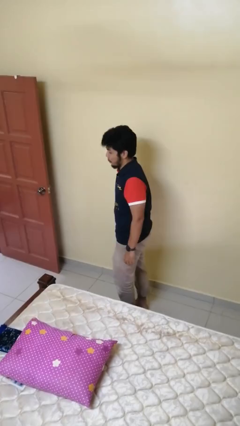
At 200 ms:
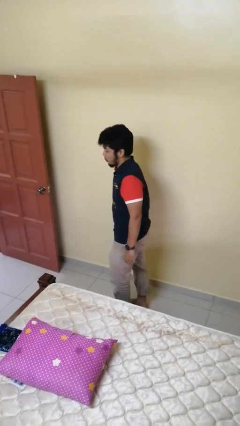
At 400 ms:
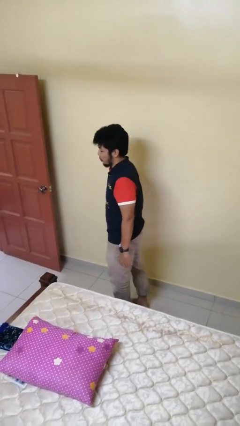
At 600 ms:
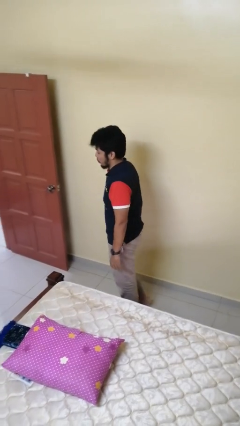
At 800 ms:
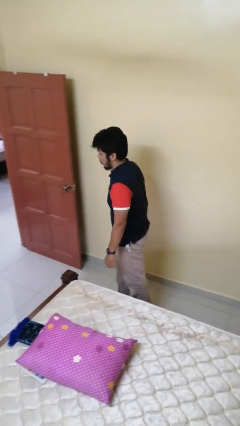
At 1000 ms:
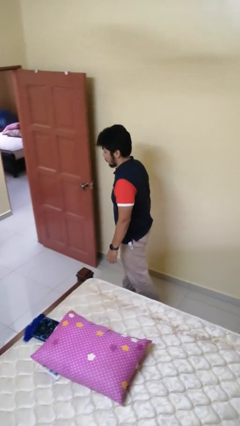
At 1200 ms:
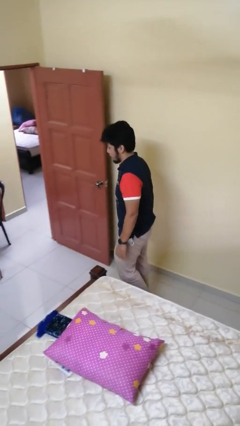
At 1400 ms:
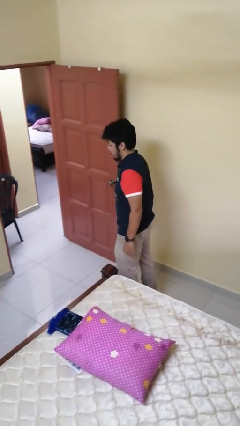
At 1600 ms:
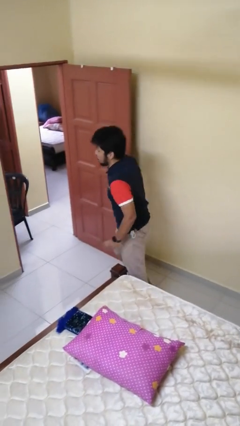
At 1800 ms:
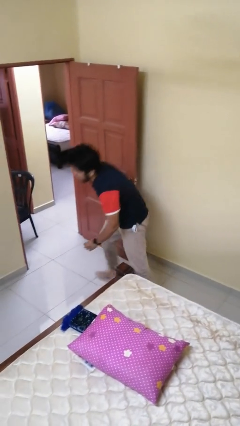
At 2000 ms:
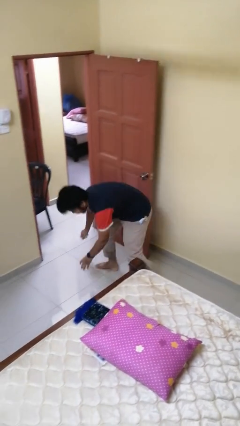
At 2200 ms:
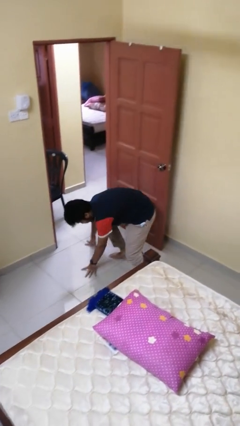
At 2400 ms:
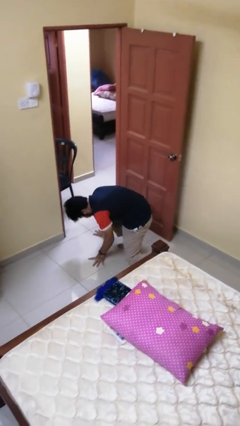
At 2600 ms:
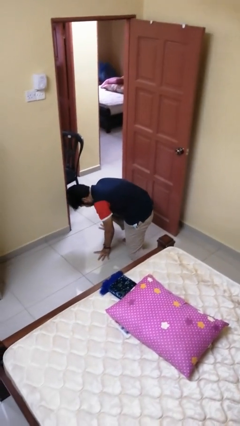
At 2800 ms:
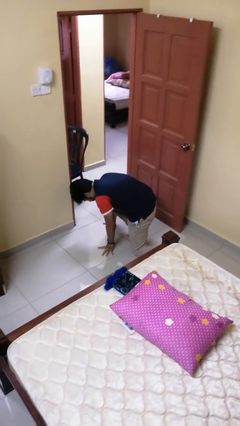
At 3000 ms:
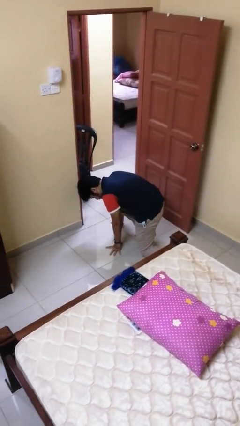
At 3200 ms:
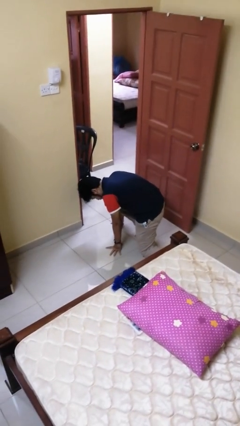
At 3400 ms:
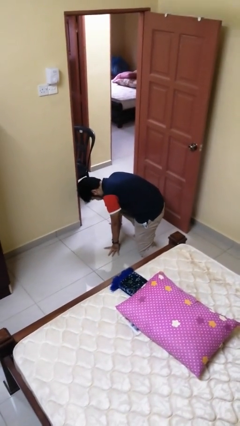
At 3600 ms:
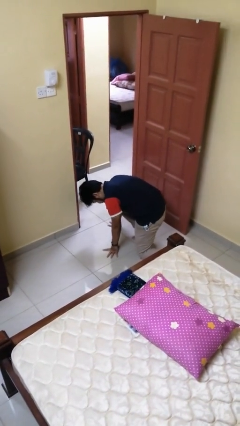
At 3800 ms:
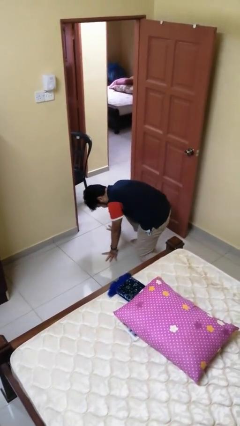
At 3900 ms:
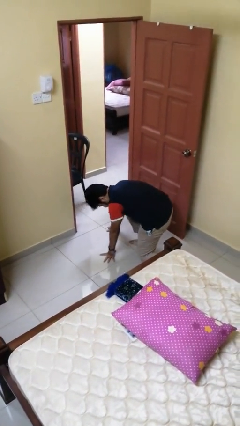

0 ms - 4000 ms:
person trips on object on floor

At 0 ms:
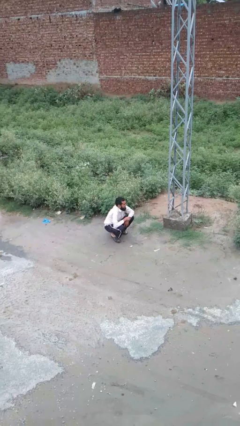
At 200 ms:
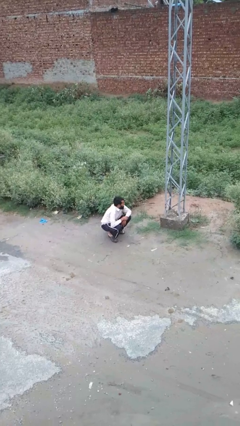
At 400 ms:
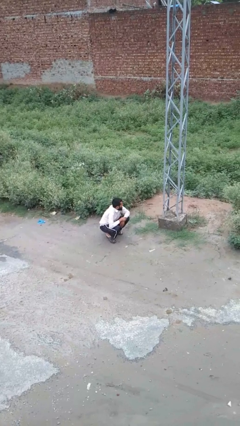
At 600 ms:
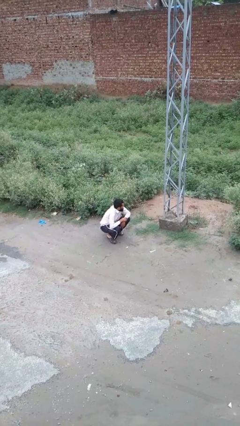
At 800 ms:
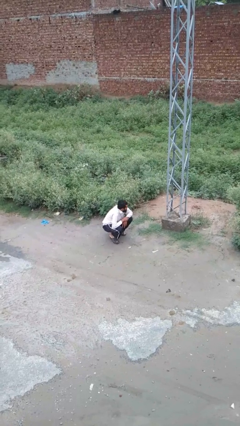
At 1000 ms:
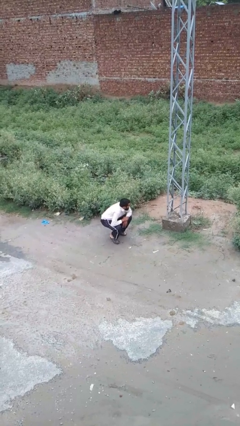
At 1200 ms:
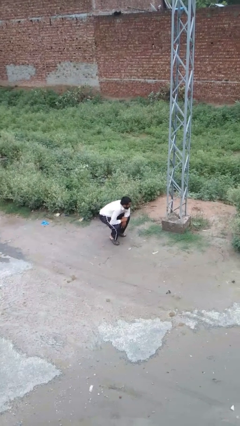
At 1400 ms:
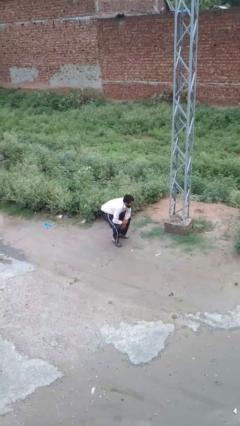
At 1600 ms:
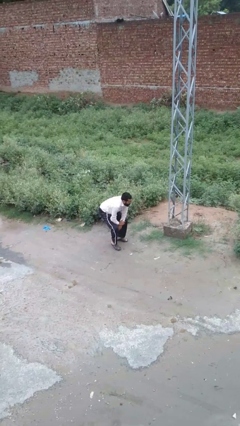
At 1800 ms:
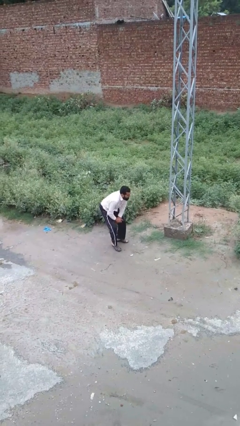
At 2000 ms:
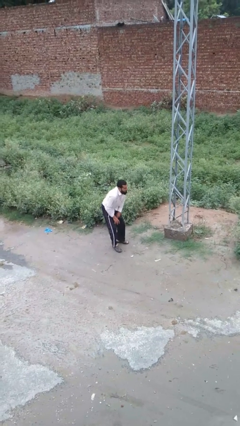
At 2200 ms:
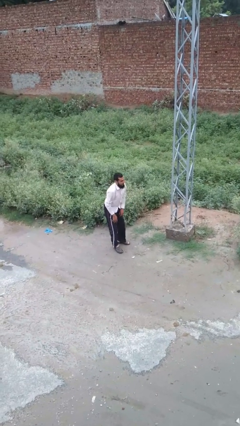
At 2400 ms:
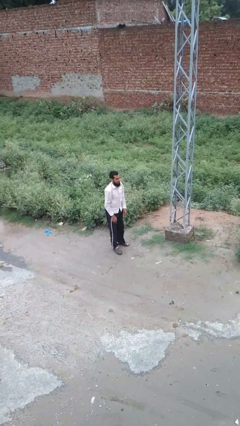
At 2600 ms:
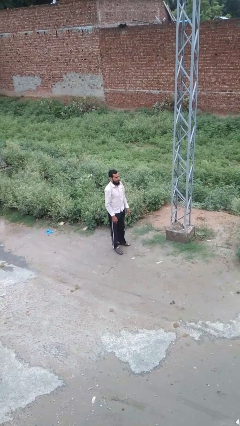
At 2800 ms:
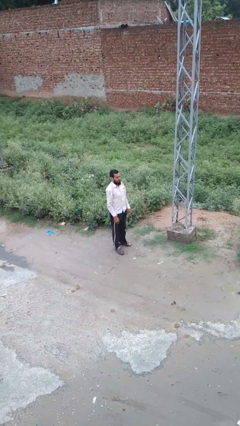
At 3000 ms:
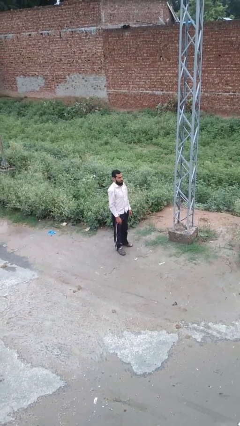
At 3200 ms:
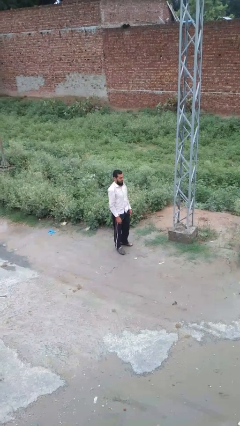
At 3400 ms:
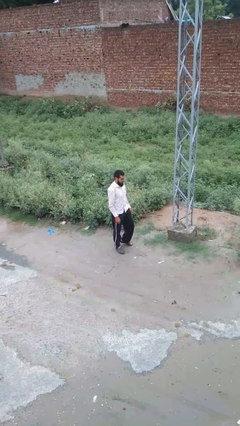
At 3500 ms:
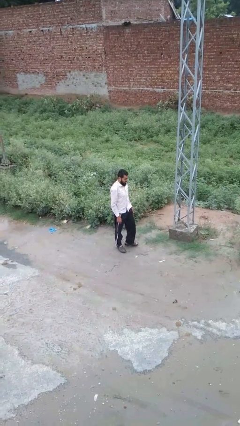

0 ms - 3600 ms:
person stands up from floor

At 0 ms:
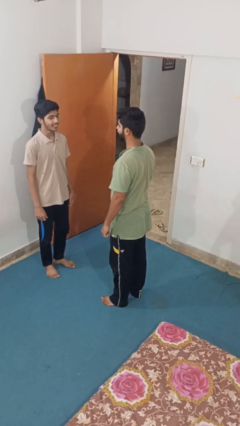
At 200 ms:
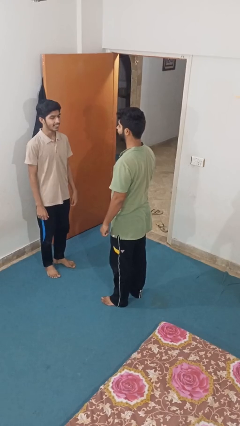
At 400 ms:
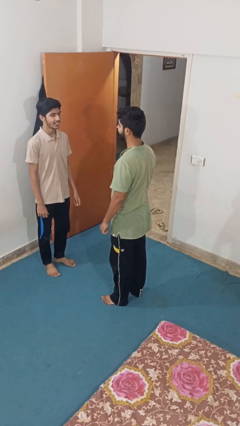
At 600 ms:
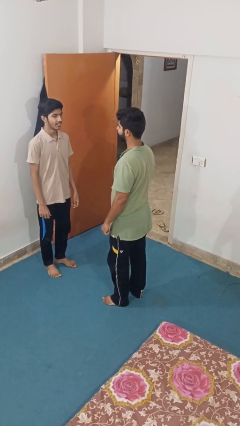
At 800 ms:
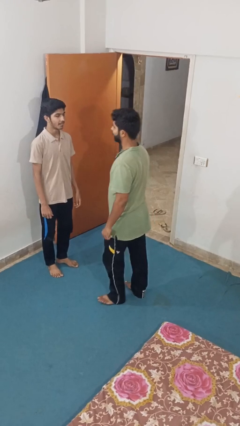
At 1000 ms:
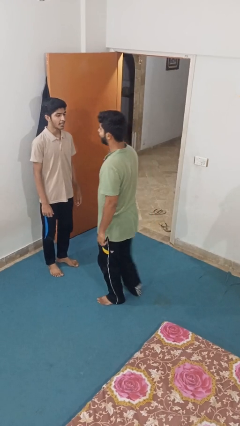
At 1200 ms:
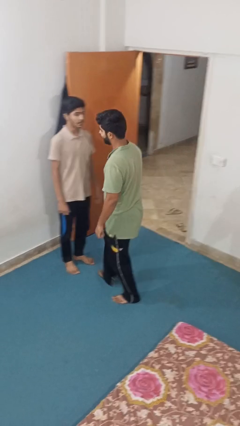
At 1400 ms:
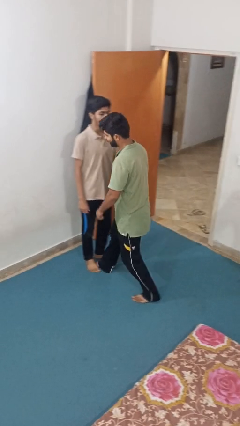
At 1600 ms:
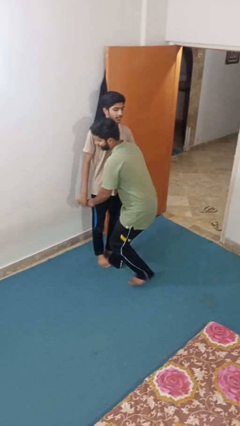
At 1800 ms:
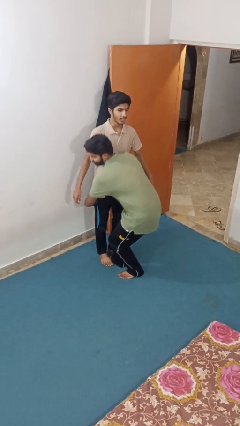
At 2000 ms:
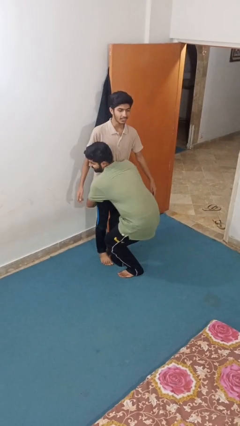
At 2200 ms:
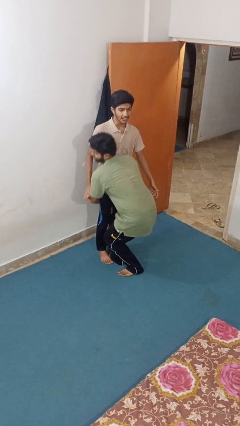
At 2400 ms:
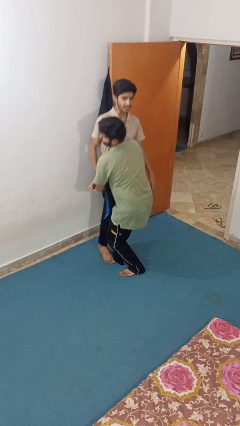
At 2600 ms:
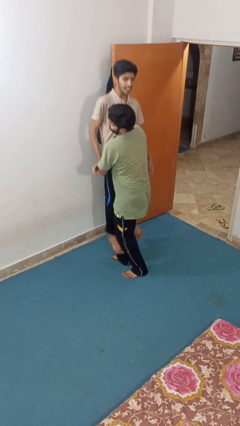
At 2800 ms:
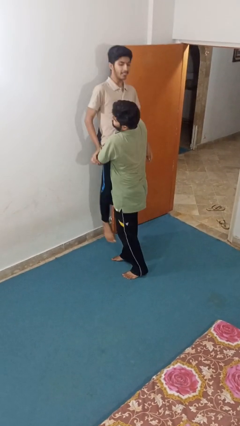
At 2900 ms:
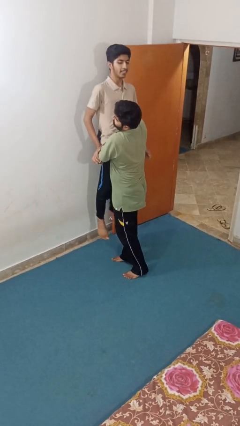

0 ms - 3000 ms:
person picks up person

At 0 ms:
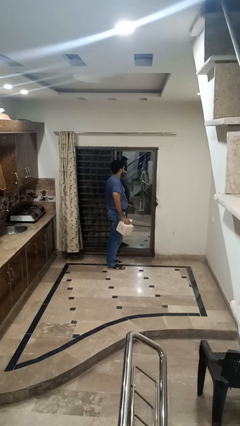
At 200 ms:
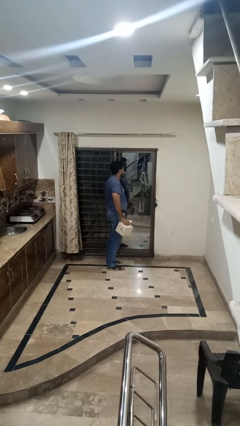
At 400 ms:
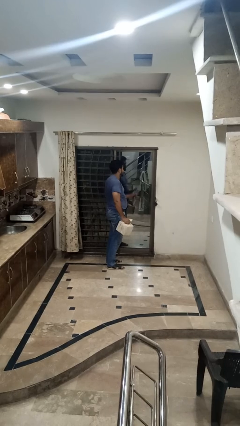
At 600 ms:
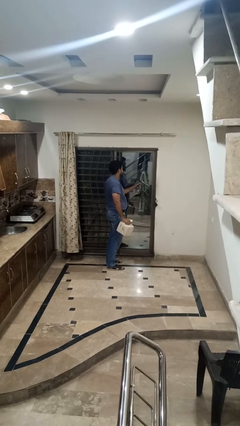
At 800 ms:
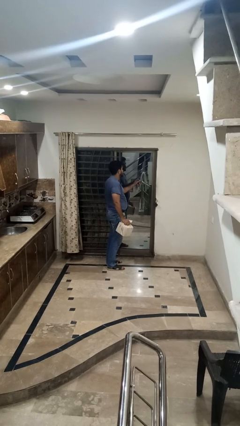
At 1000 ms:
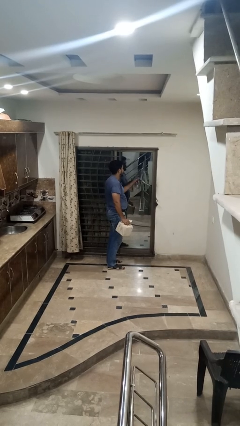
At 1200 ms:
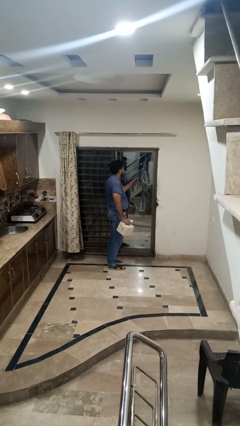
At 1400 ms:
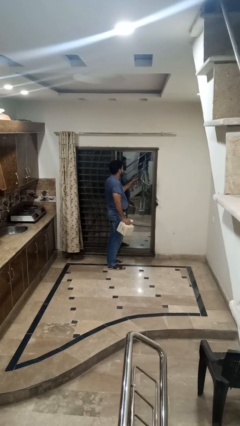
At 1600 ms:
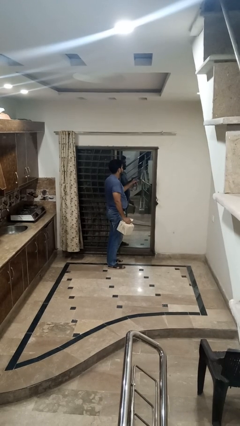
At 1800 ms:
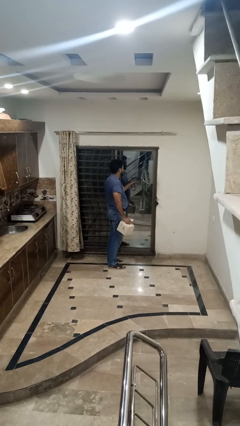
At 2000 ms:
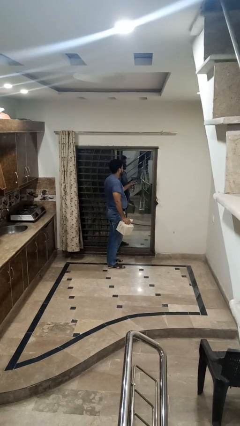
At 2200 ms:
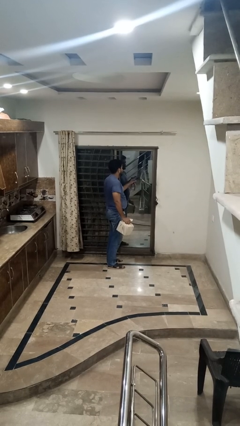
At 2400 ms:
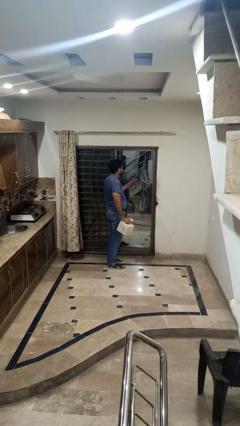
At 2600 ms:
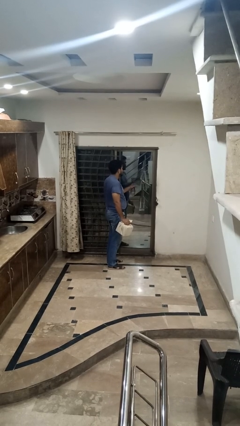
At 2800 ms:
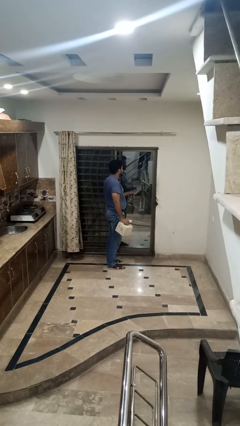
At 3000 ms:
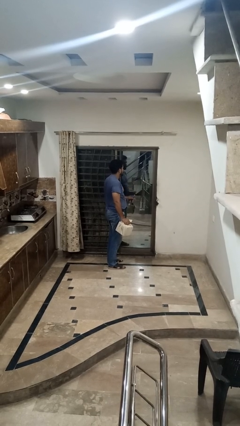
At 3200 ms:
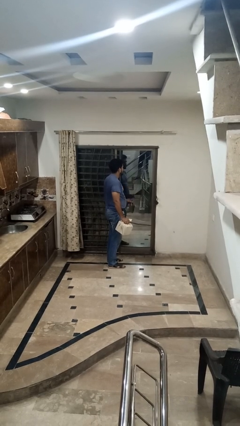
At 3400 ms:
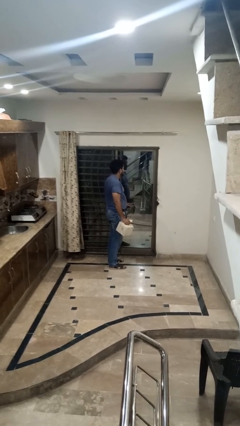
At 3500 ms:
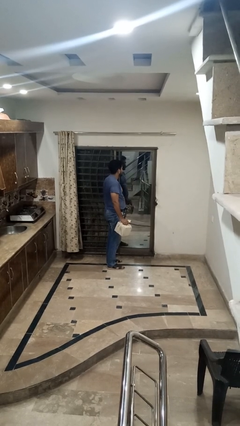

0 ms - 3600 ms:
person sprays from bottle

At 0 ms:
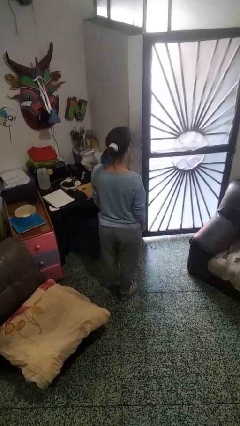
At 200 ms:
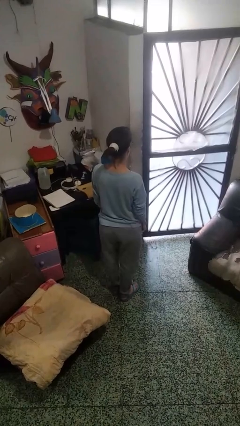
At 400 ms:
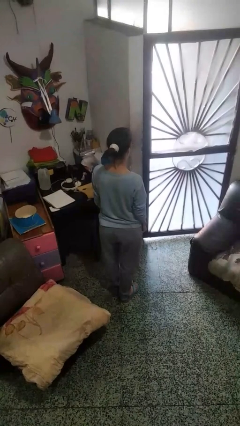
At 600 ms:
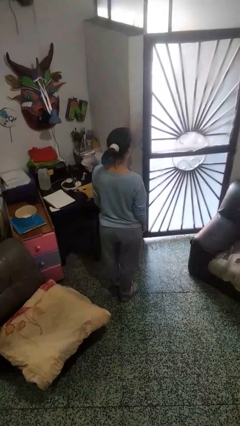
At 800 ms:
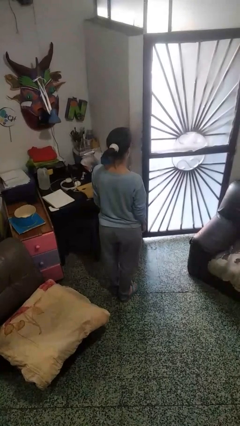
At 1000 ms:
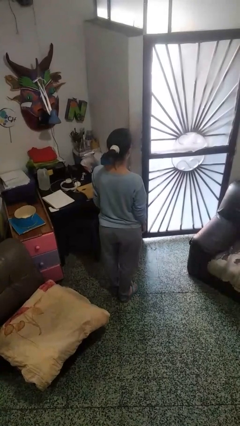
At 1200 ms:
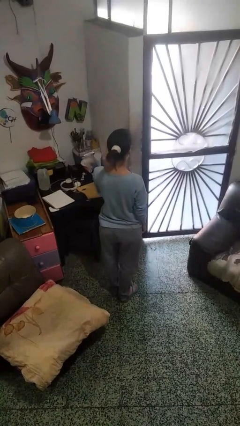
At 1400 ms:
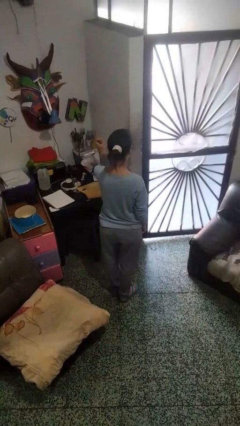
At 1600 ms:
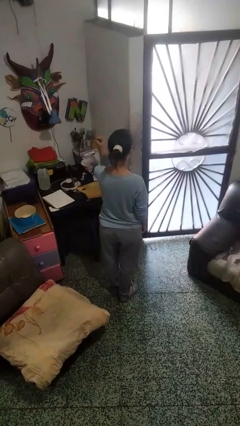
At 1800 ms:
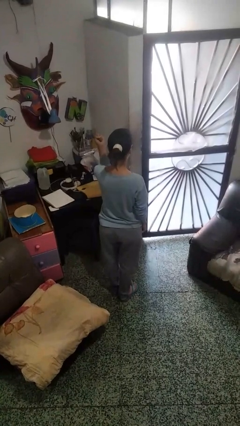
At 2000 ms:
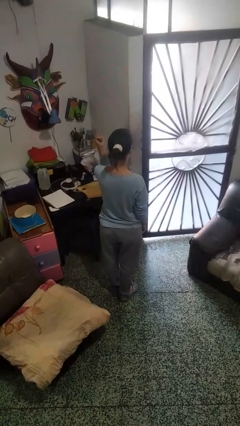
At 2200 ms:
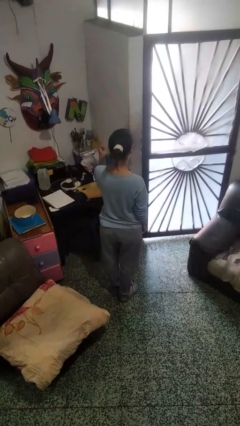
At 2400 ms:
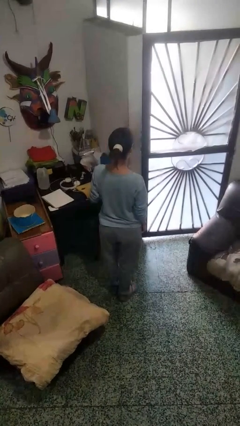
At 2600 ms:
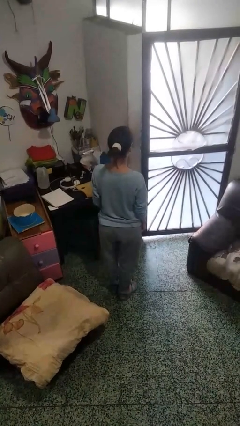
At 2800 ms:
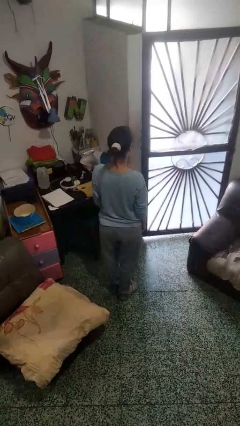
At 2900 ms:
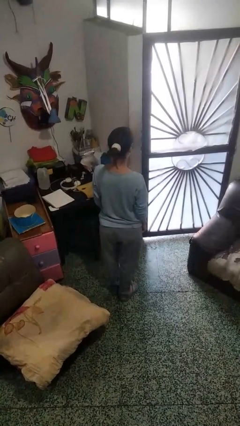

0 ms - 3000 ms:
person gestures number one
